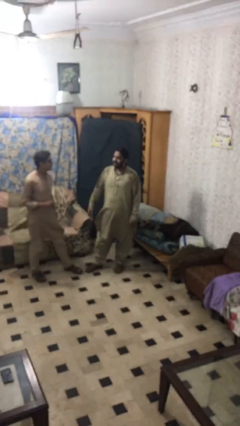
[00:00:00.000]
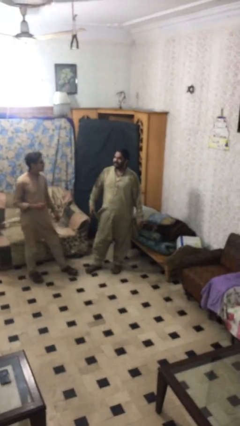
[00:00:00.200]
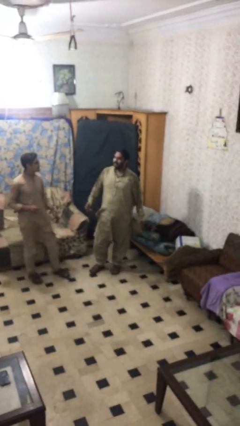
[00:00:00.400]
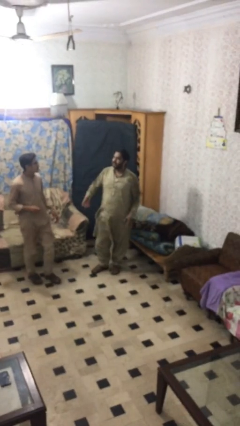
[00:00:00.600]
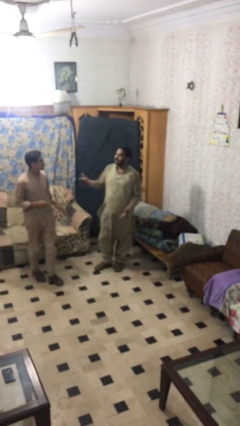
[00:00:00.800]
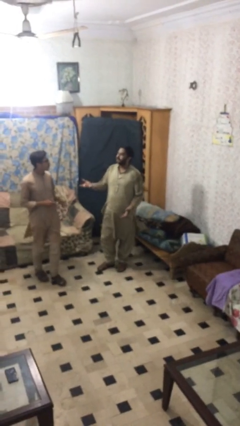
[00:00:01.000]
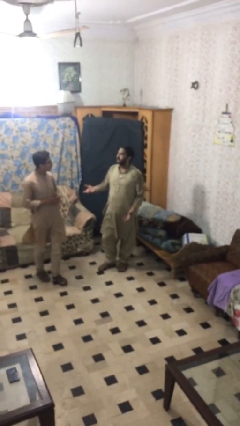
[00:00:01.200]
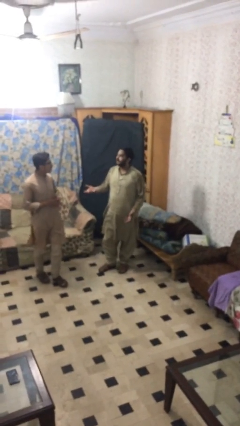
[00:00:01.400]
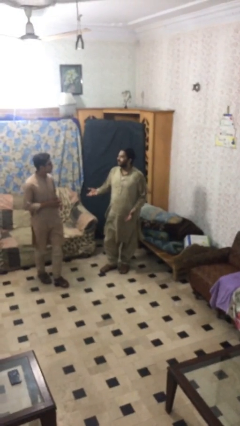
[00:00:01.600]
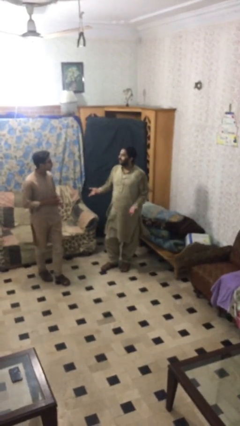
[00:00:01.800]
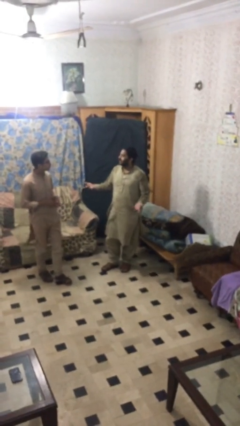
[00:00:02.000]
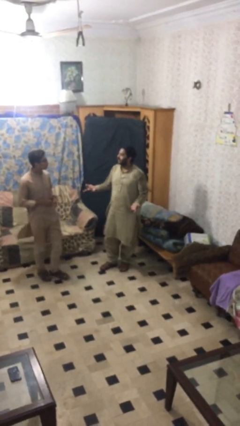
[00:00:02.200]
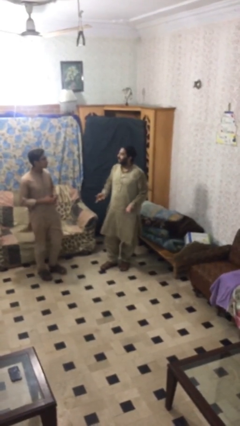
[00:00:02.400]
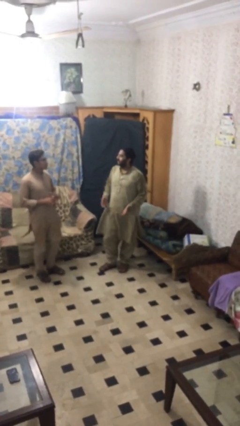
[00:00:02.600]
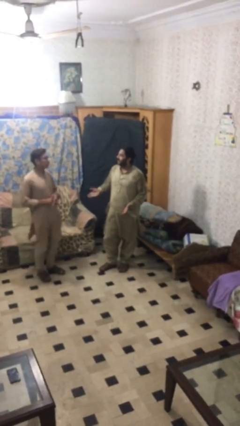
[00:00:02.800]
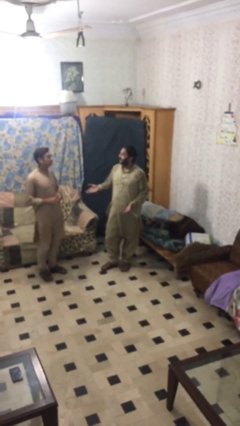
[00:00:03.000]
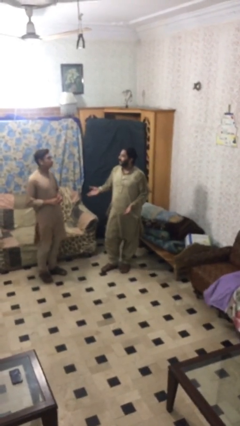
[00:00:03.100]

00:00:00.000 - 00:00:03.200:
person talks to person

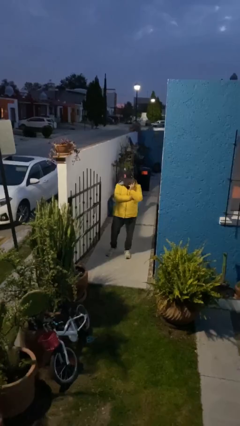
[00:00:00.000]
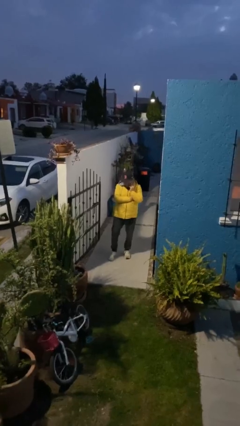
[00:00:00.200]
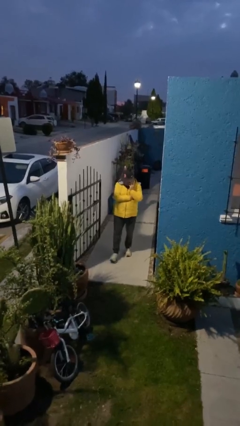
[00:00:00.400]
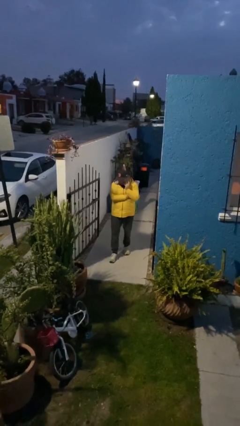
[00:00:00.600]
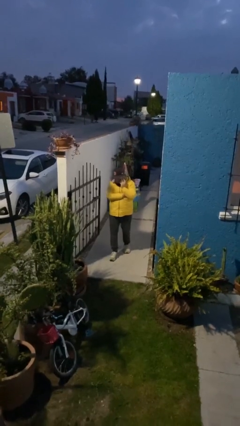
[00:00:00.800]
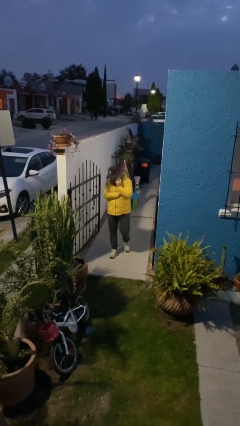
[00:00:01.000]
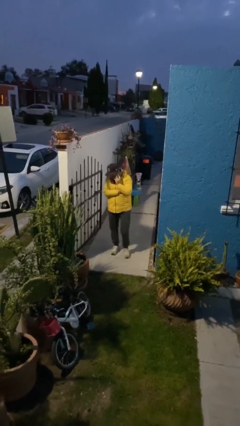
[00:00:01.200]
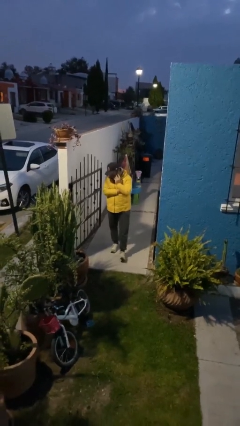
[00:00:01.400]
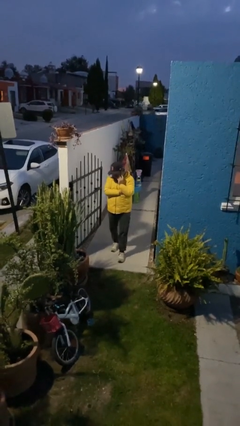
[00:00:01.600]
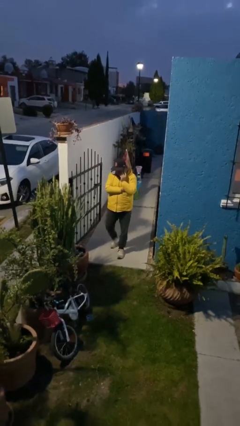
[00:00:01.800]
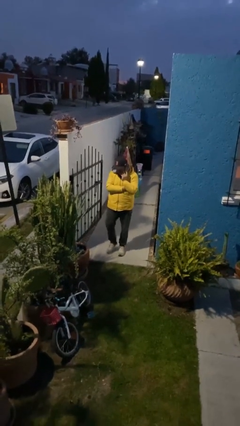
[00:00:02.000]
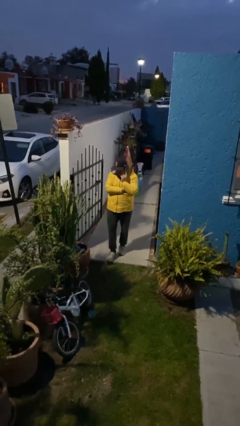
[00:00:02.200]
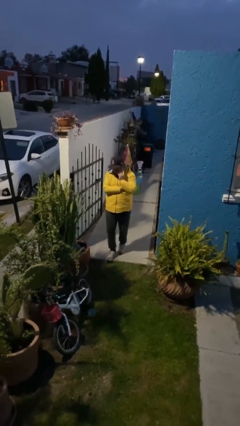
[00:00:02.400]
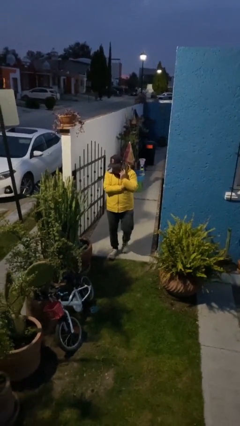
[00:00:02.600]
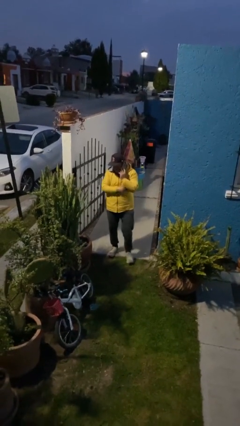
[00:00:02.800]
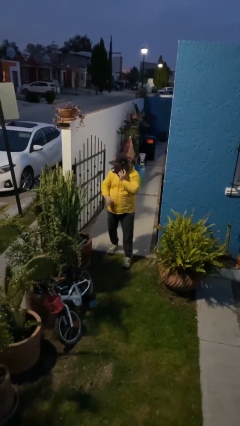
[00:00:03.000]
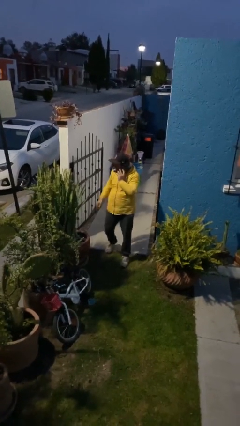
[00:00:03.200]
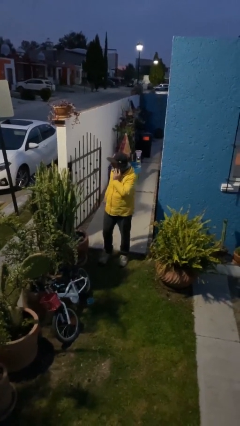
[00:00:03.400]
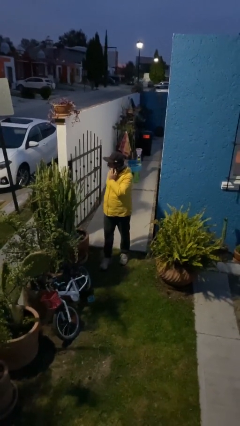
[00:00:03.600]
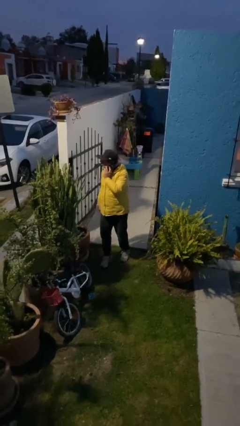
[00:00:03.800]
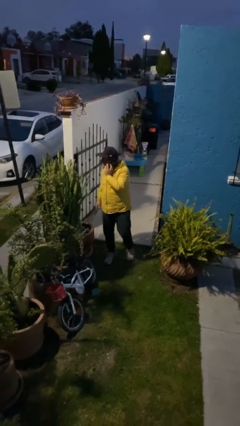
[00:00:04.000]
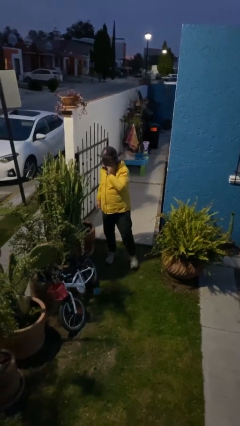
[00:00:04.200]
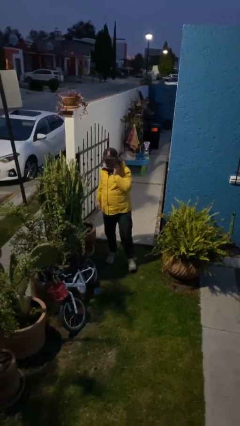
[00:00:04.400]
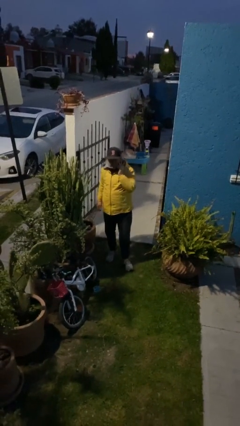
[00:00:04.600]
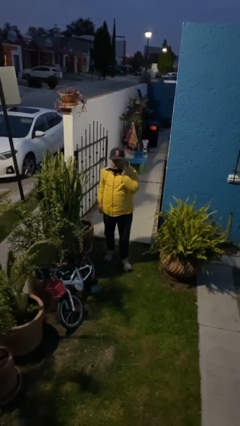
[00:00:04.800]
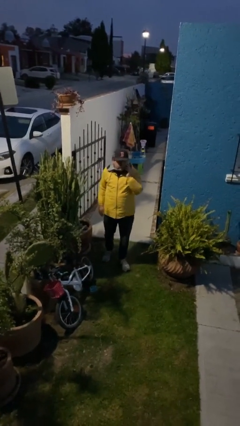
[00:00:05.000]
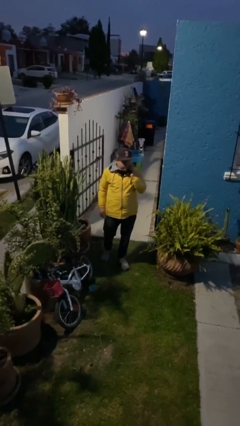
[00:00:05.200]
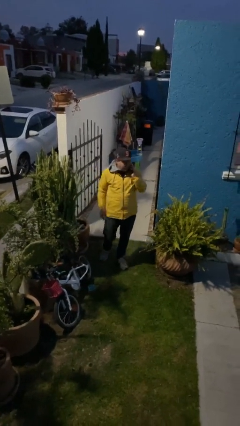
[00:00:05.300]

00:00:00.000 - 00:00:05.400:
person enters scene through structure

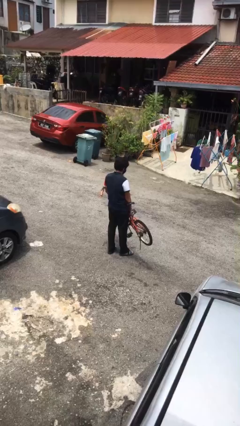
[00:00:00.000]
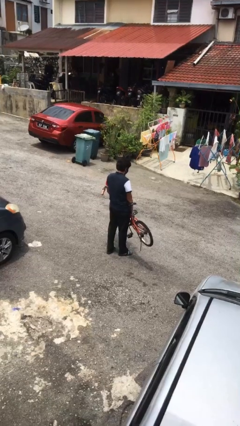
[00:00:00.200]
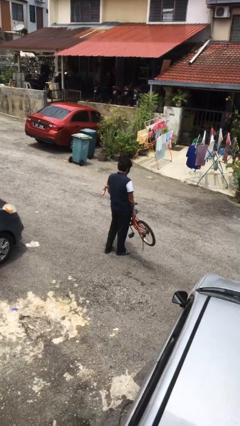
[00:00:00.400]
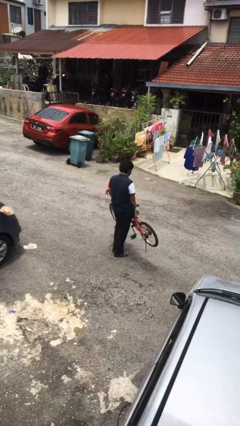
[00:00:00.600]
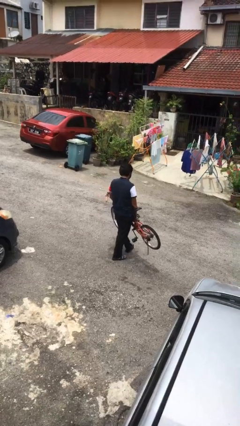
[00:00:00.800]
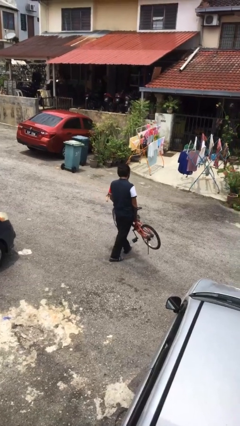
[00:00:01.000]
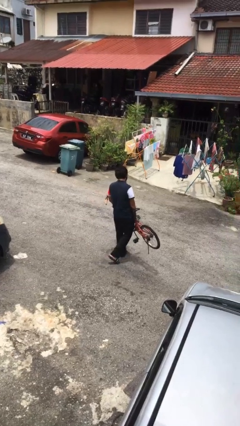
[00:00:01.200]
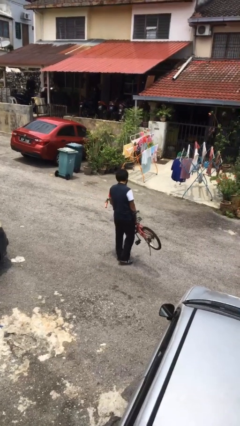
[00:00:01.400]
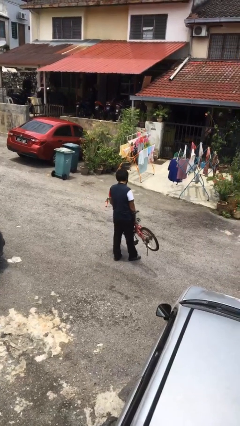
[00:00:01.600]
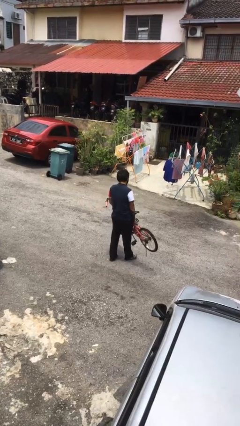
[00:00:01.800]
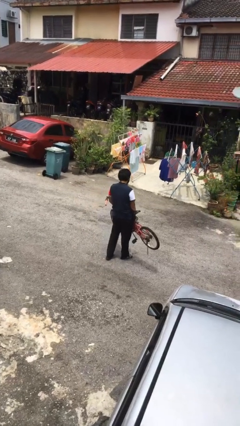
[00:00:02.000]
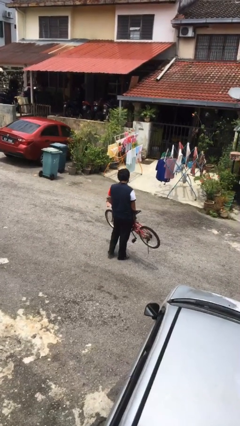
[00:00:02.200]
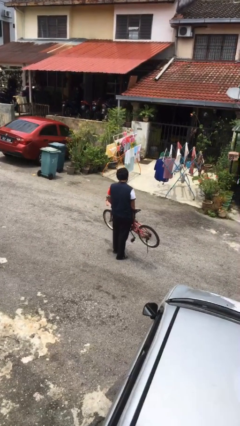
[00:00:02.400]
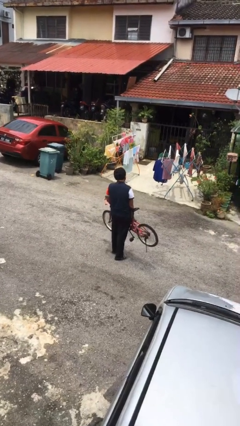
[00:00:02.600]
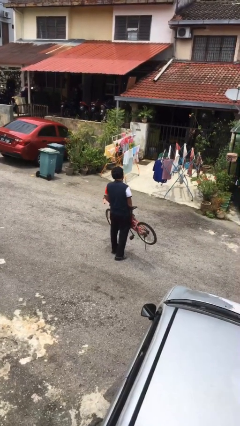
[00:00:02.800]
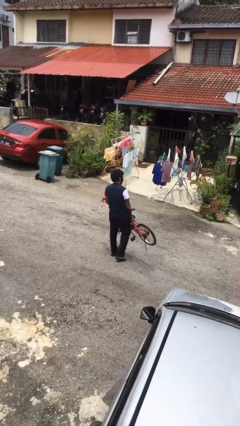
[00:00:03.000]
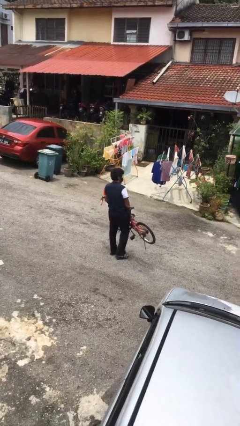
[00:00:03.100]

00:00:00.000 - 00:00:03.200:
person carries bicycle

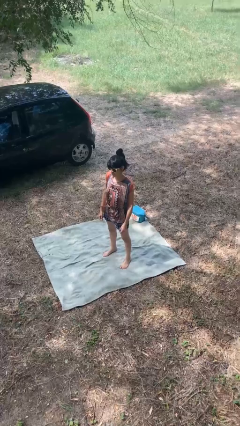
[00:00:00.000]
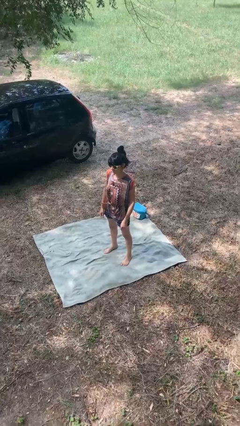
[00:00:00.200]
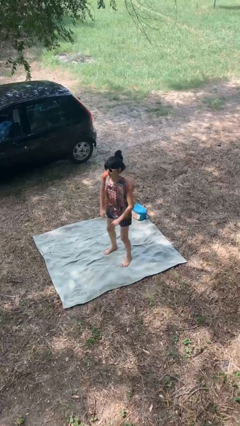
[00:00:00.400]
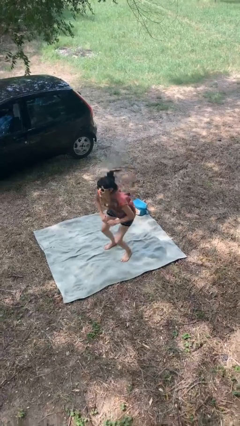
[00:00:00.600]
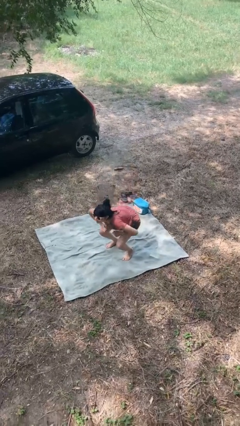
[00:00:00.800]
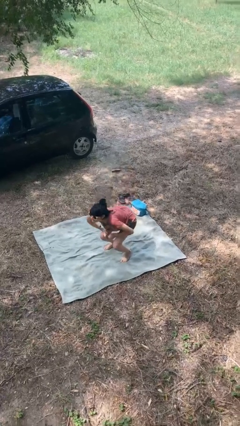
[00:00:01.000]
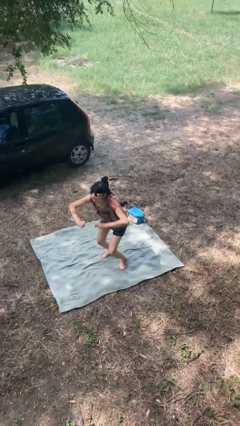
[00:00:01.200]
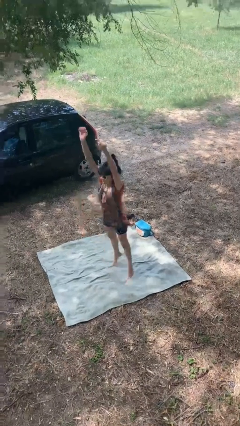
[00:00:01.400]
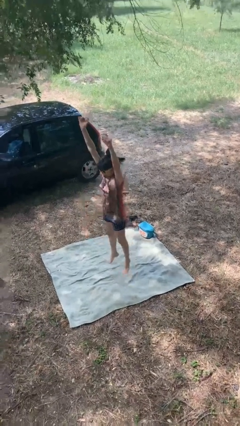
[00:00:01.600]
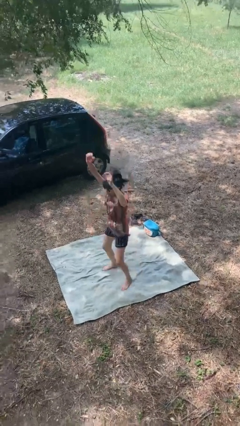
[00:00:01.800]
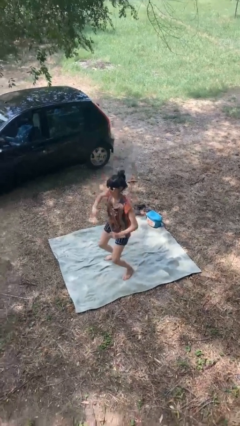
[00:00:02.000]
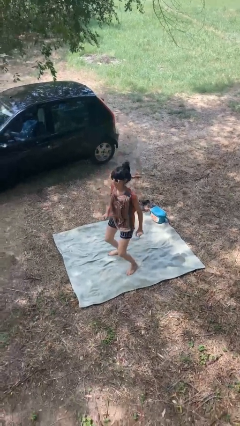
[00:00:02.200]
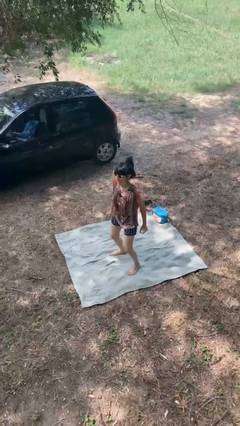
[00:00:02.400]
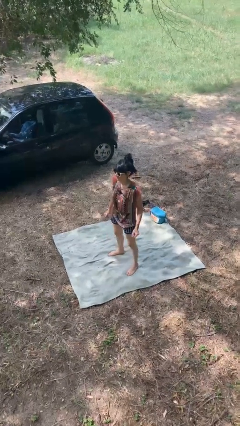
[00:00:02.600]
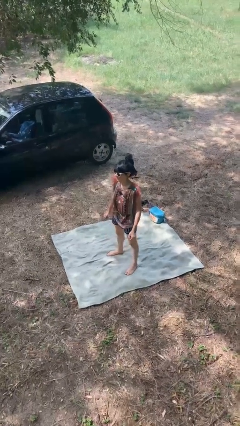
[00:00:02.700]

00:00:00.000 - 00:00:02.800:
person jumps

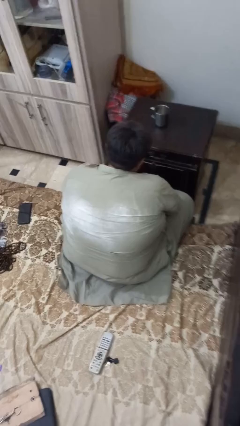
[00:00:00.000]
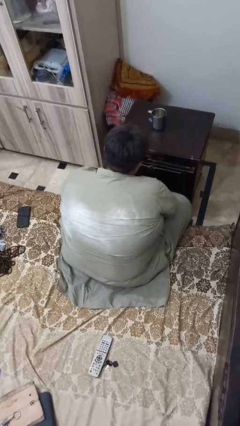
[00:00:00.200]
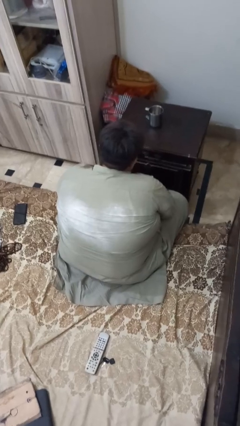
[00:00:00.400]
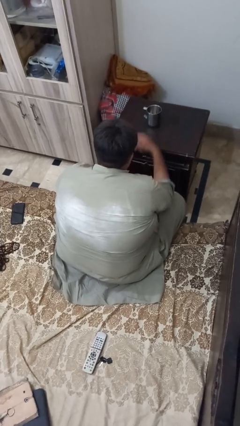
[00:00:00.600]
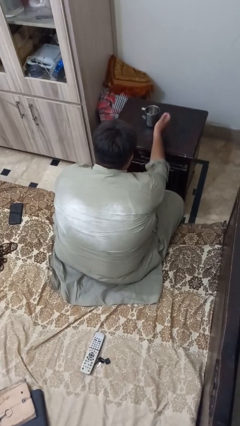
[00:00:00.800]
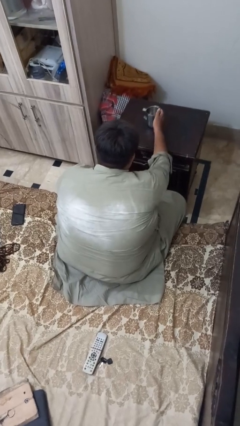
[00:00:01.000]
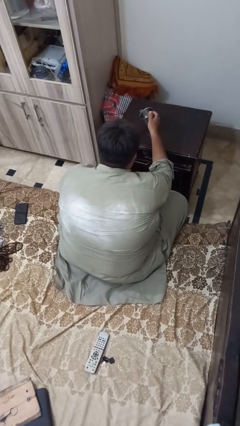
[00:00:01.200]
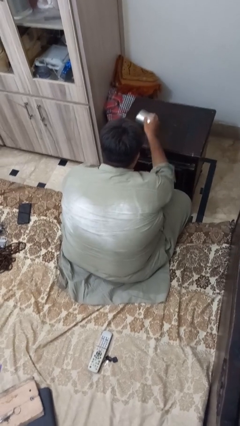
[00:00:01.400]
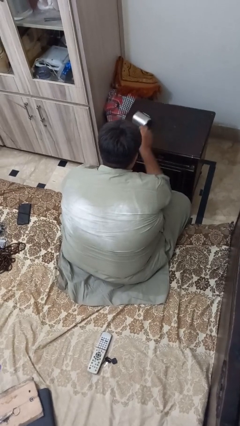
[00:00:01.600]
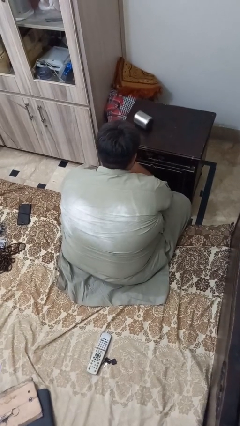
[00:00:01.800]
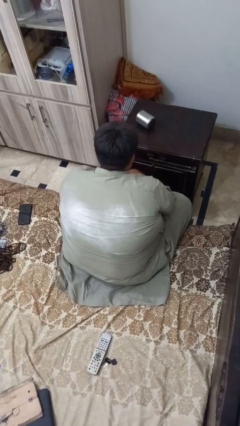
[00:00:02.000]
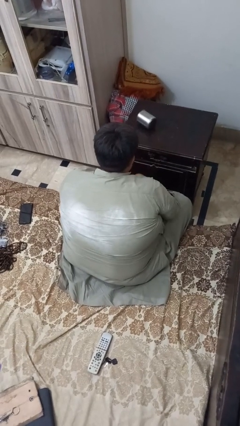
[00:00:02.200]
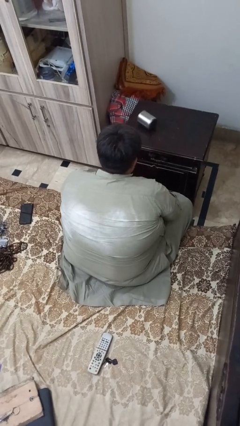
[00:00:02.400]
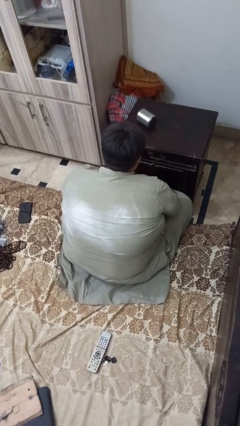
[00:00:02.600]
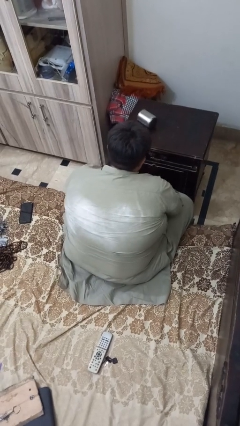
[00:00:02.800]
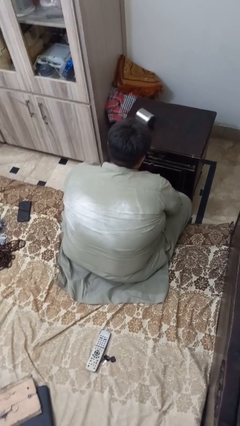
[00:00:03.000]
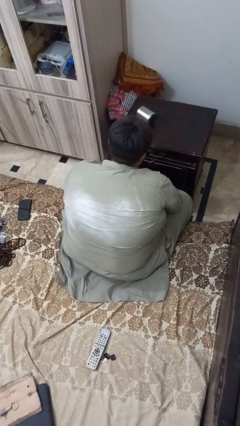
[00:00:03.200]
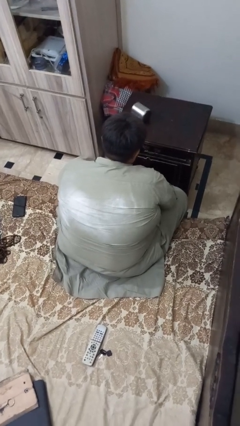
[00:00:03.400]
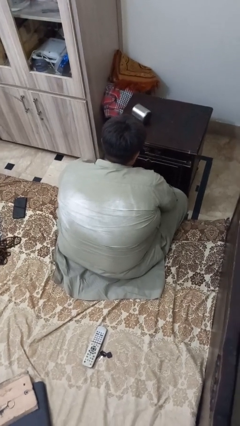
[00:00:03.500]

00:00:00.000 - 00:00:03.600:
person knocks over glass
